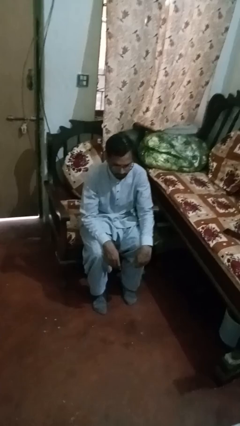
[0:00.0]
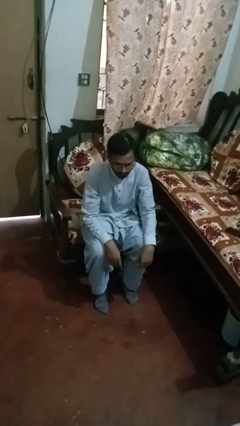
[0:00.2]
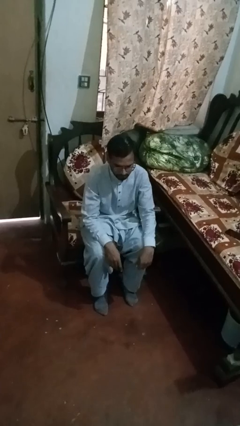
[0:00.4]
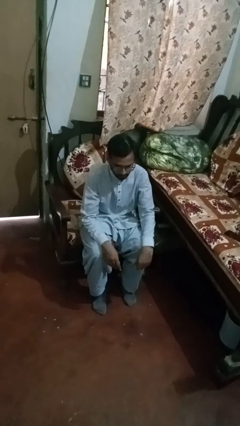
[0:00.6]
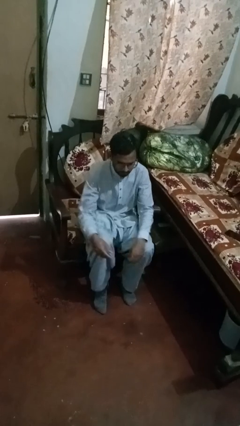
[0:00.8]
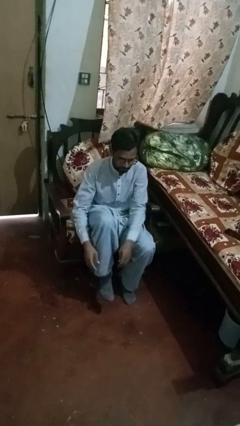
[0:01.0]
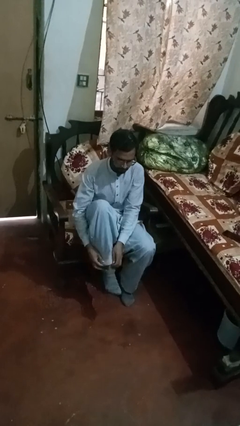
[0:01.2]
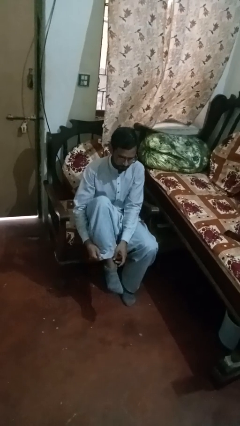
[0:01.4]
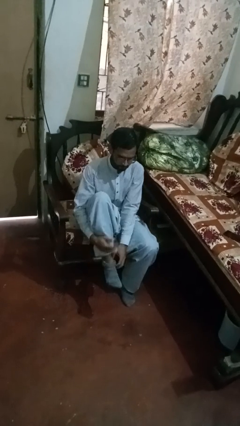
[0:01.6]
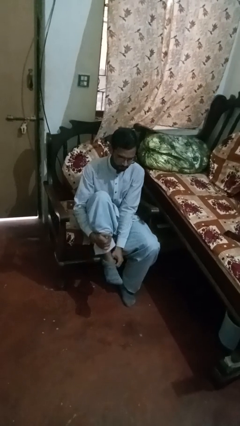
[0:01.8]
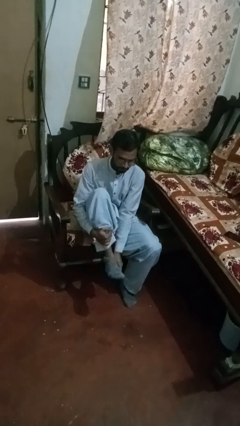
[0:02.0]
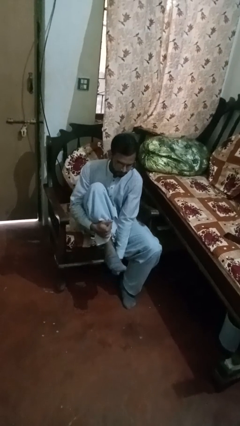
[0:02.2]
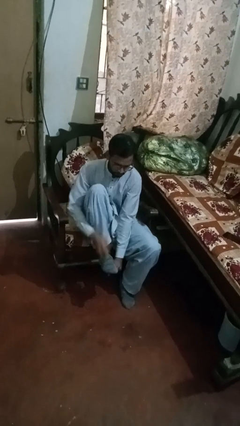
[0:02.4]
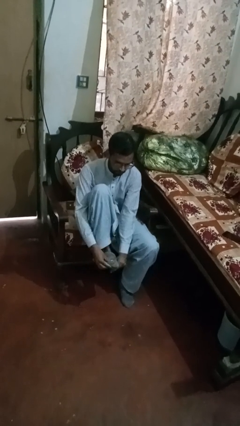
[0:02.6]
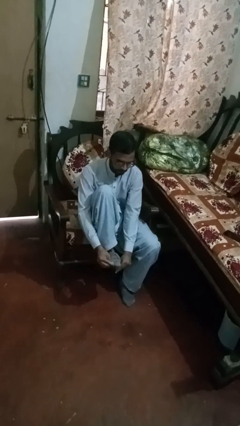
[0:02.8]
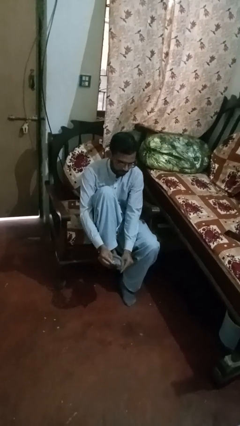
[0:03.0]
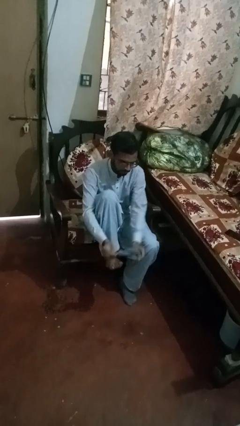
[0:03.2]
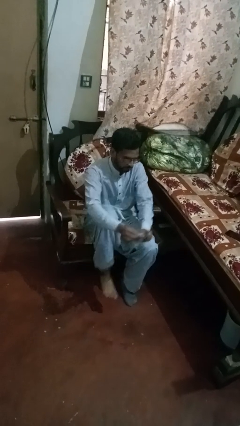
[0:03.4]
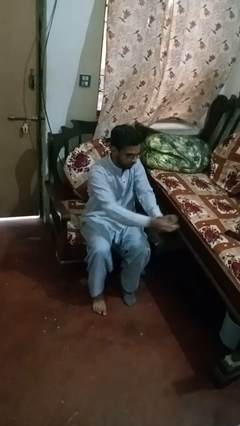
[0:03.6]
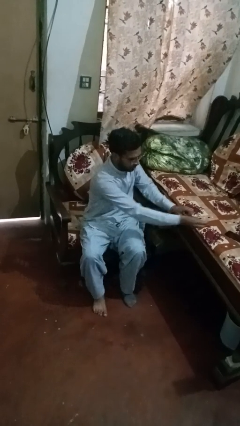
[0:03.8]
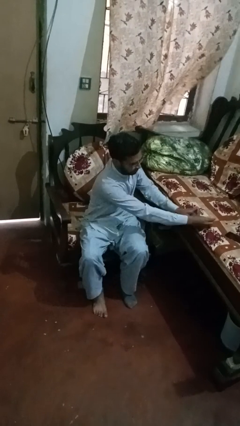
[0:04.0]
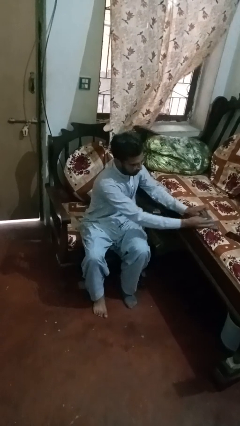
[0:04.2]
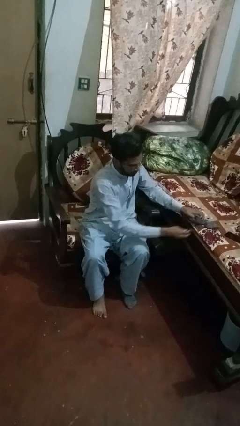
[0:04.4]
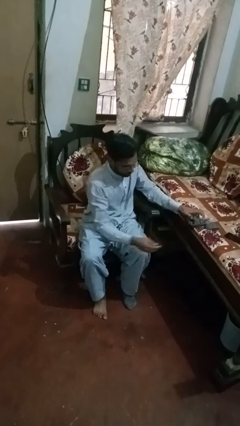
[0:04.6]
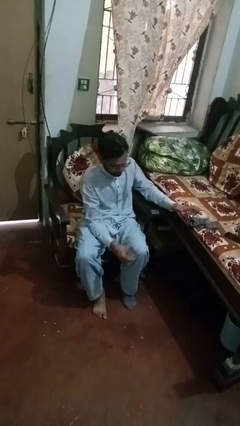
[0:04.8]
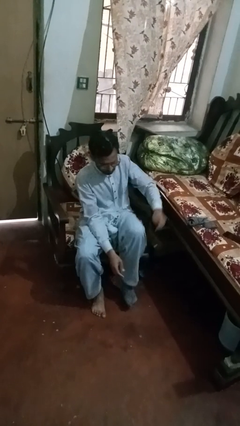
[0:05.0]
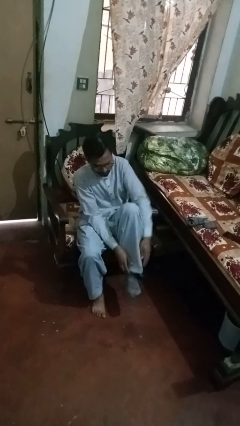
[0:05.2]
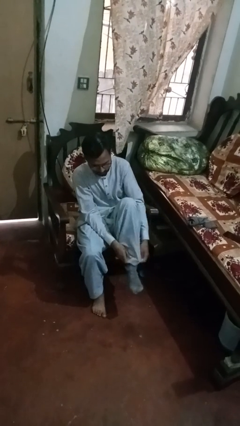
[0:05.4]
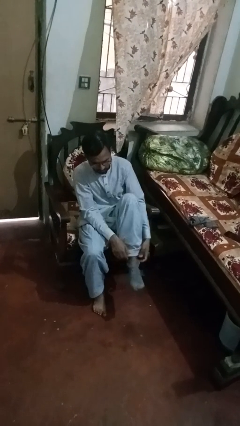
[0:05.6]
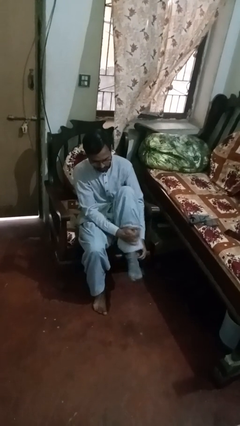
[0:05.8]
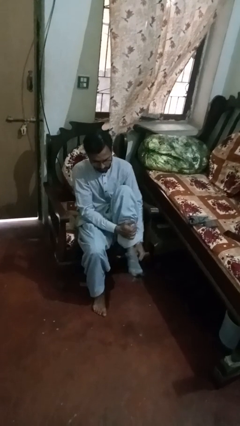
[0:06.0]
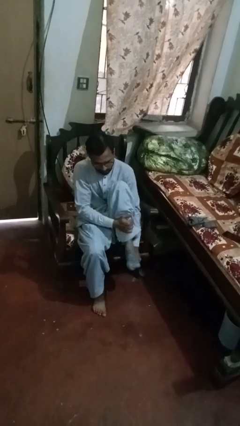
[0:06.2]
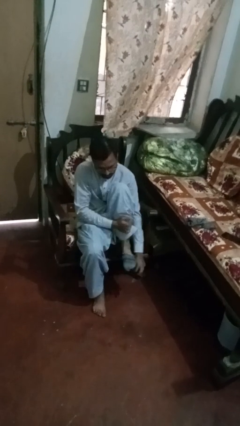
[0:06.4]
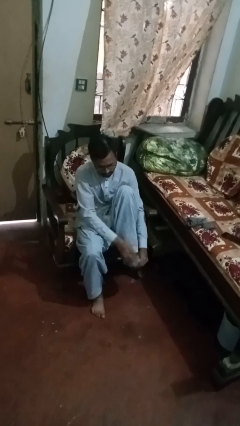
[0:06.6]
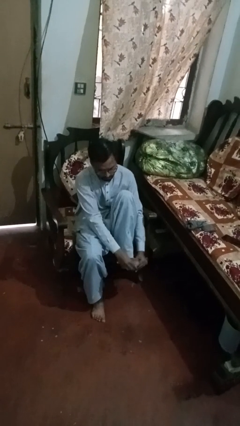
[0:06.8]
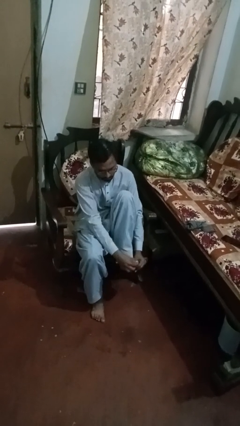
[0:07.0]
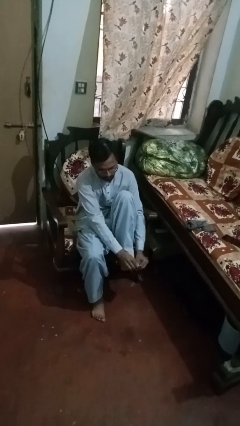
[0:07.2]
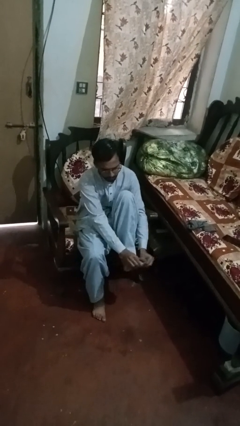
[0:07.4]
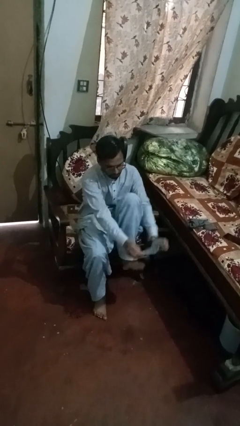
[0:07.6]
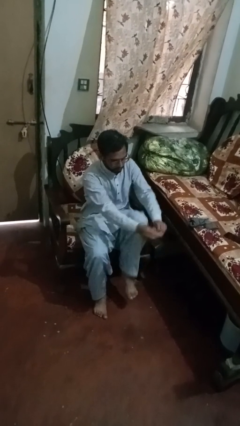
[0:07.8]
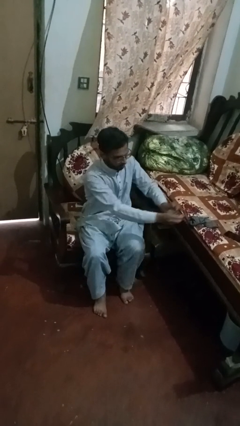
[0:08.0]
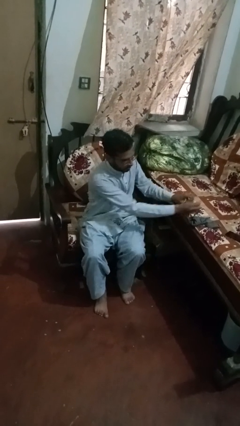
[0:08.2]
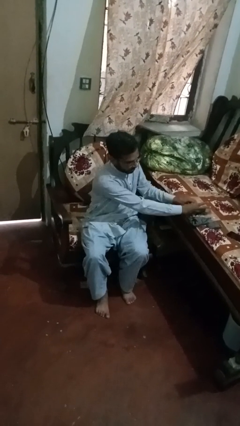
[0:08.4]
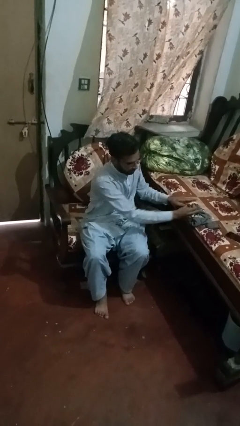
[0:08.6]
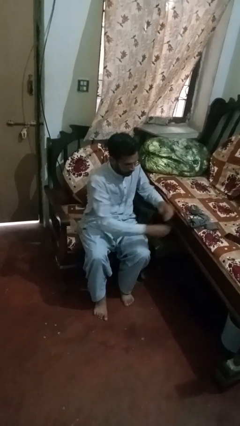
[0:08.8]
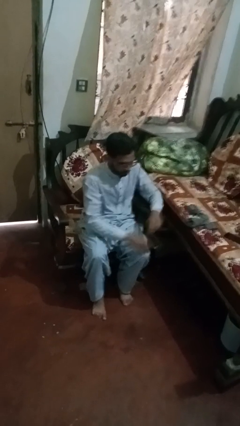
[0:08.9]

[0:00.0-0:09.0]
person takes off socks

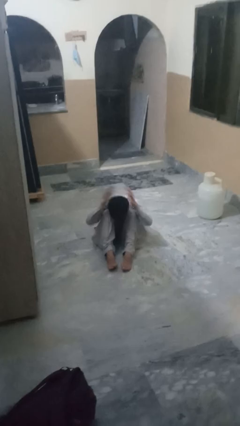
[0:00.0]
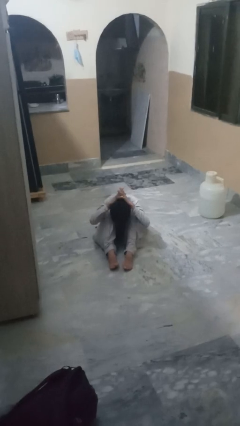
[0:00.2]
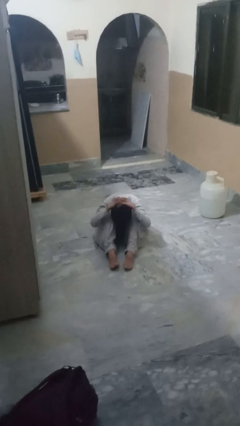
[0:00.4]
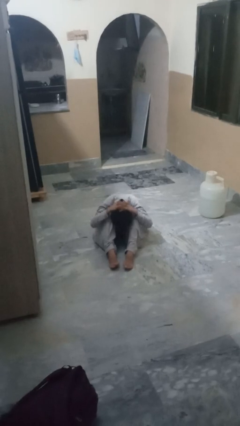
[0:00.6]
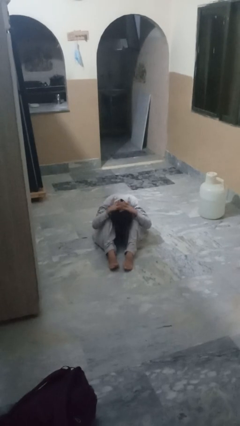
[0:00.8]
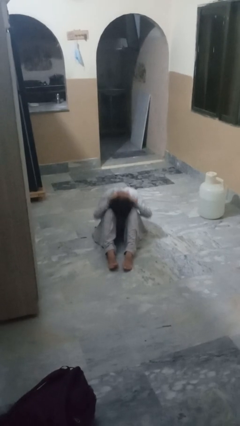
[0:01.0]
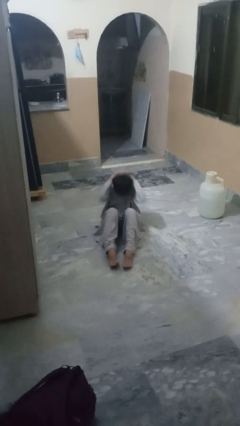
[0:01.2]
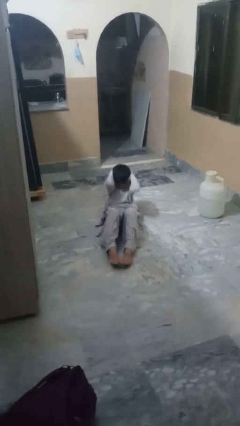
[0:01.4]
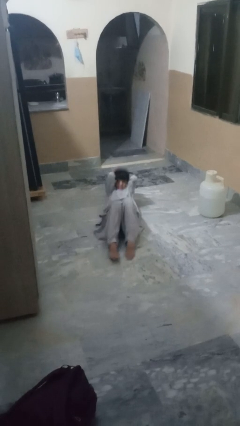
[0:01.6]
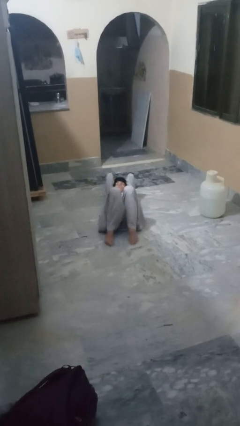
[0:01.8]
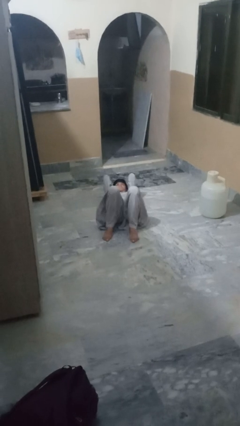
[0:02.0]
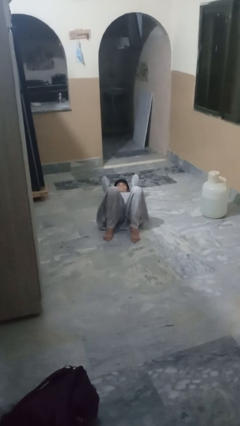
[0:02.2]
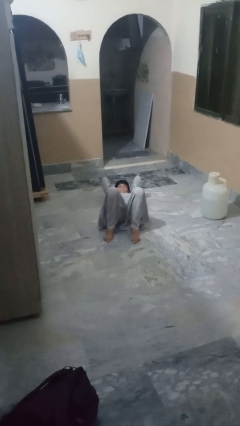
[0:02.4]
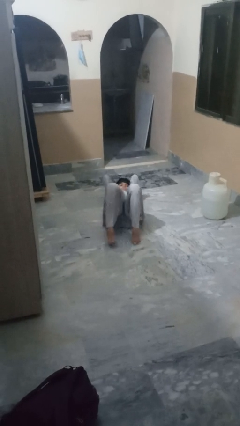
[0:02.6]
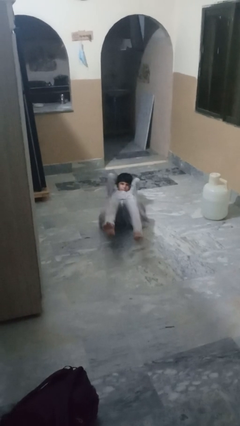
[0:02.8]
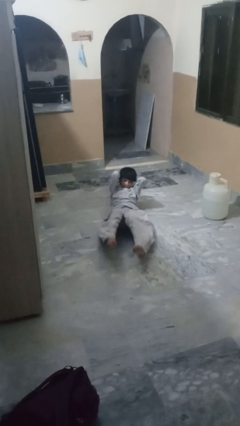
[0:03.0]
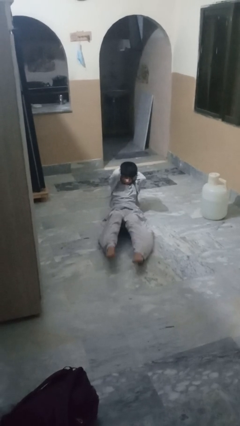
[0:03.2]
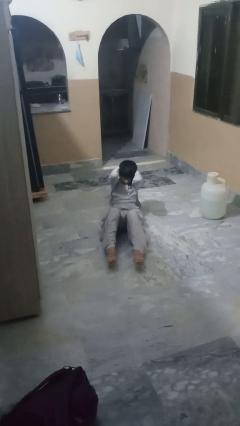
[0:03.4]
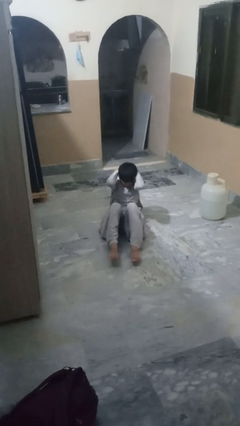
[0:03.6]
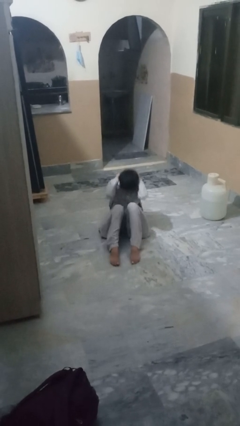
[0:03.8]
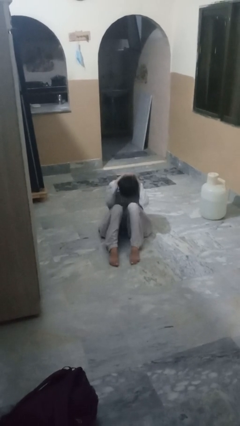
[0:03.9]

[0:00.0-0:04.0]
person exercises with situp

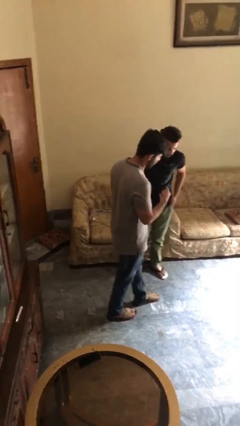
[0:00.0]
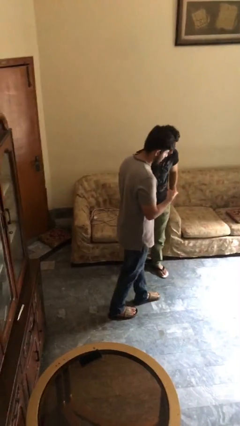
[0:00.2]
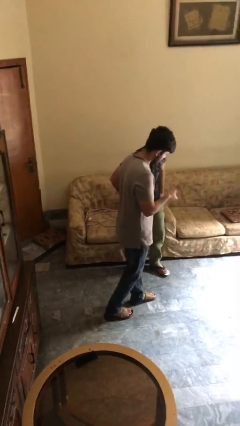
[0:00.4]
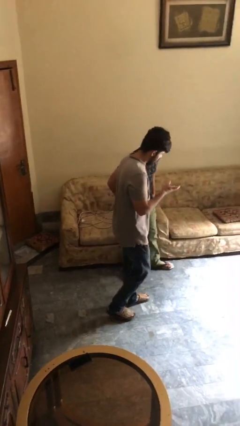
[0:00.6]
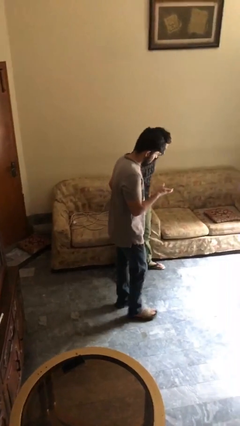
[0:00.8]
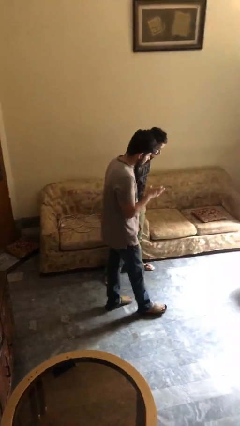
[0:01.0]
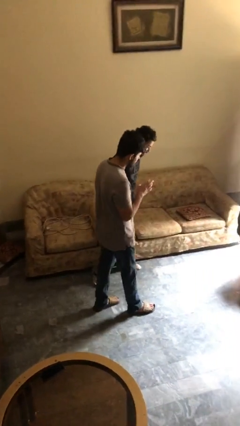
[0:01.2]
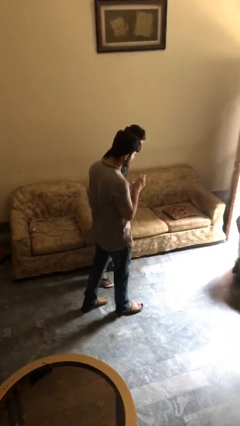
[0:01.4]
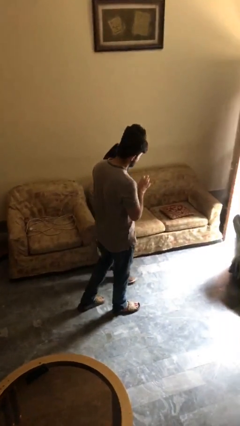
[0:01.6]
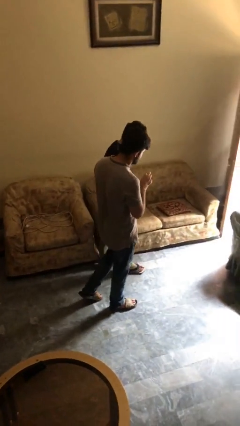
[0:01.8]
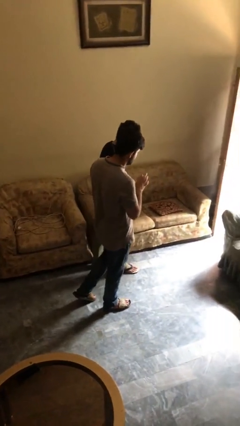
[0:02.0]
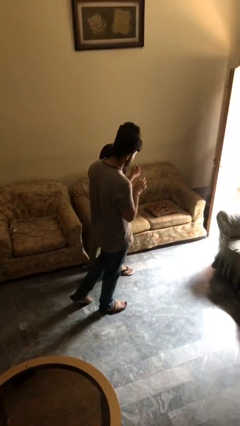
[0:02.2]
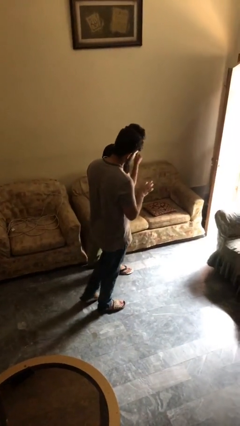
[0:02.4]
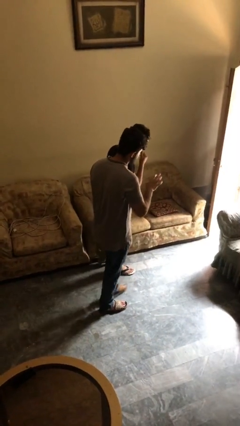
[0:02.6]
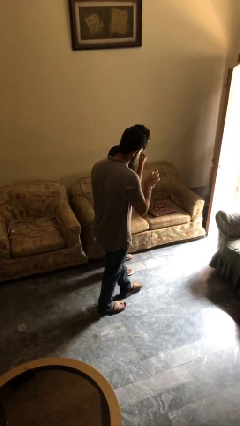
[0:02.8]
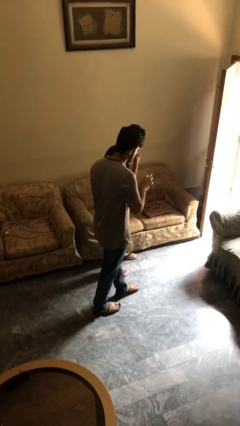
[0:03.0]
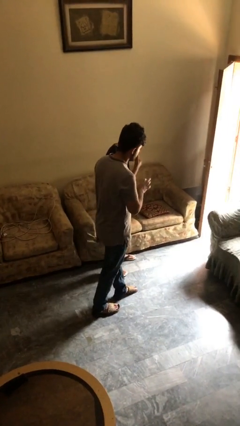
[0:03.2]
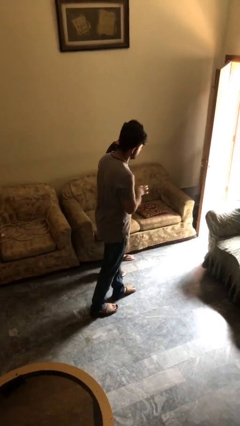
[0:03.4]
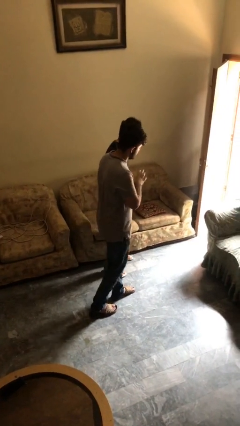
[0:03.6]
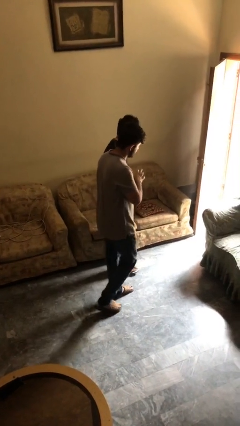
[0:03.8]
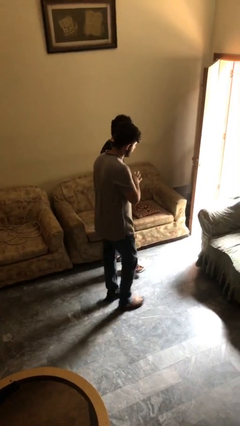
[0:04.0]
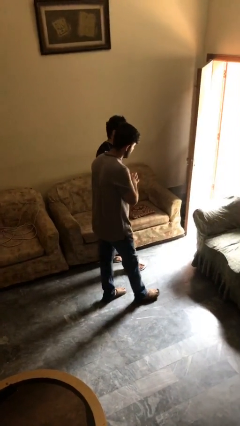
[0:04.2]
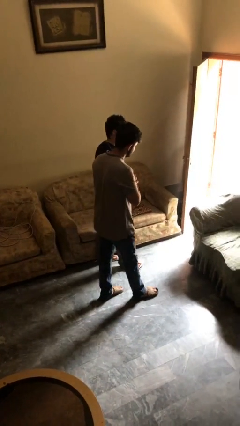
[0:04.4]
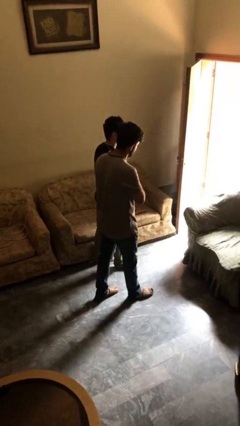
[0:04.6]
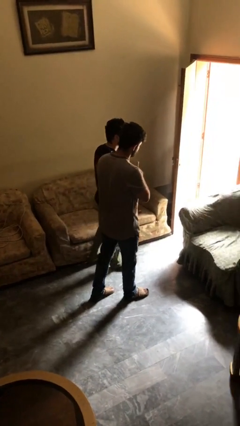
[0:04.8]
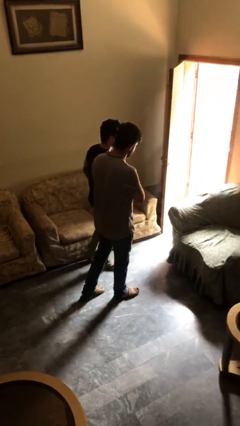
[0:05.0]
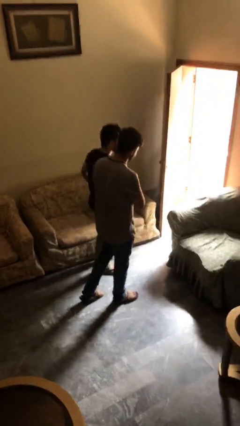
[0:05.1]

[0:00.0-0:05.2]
person talks to person
